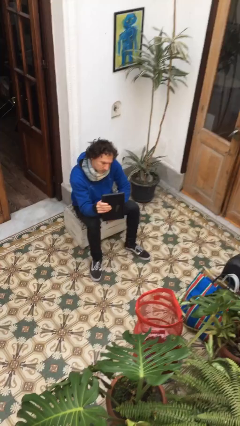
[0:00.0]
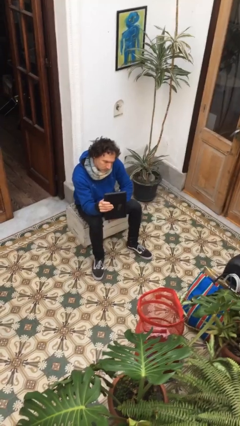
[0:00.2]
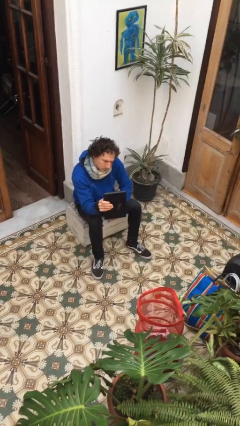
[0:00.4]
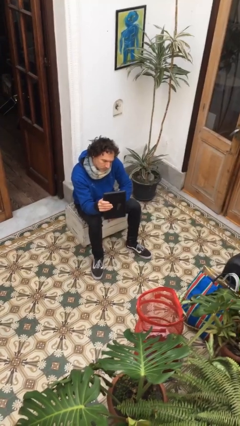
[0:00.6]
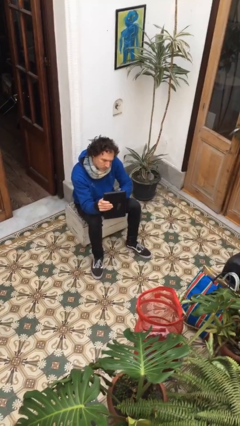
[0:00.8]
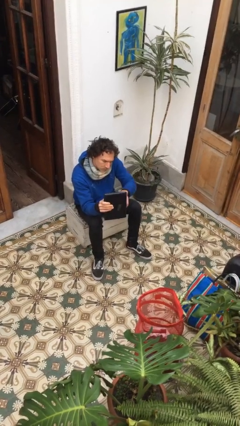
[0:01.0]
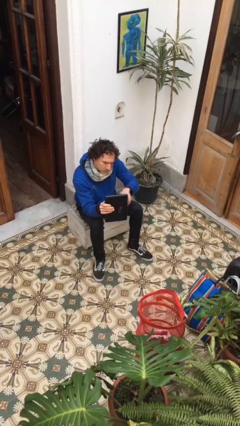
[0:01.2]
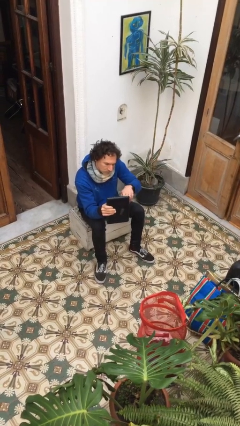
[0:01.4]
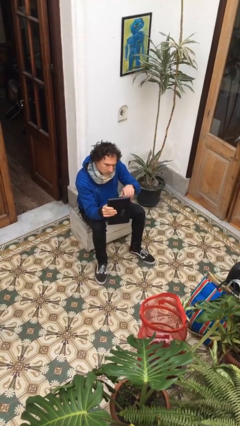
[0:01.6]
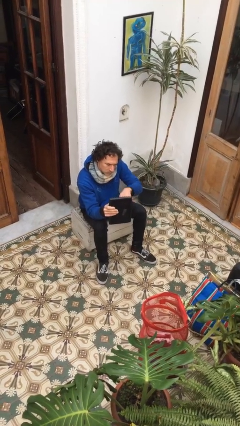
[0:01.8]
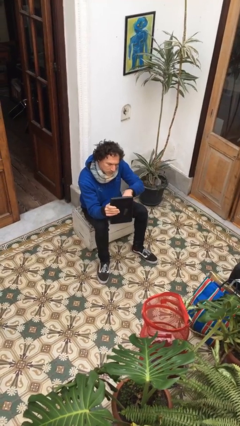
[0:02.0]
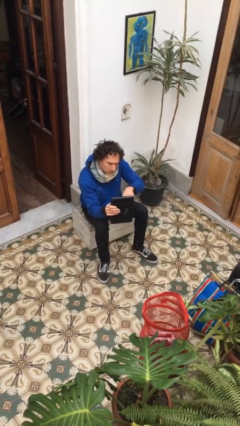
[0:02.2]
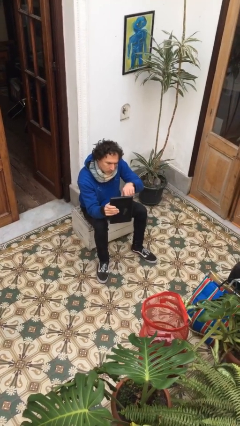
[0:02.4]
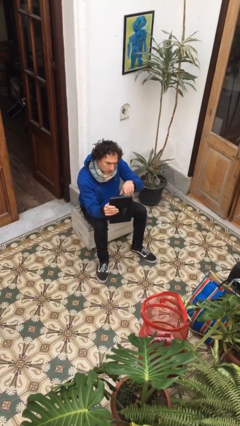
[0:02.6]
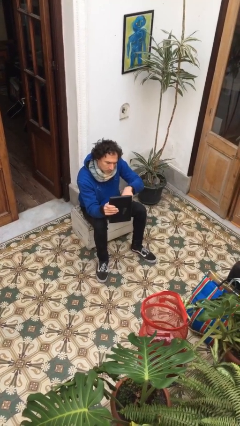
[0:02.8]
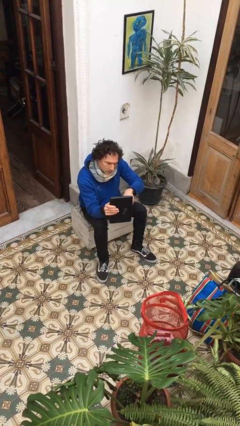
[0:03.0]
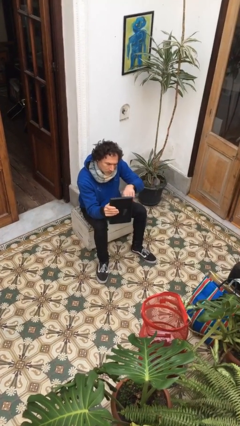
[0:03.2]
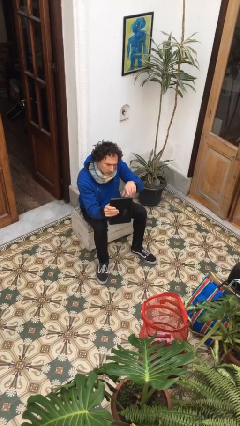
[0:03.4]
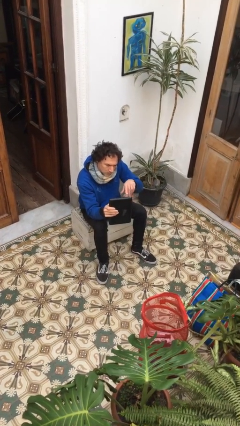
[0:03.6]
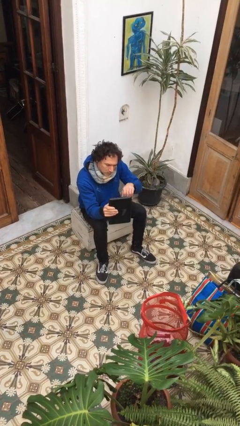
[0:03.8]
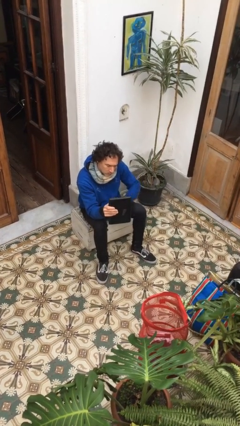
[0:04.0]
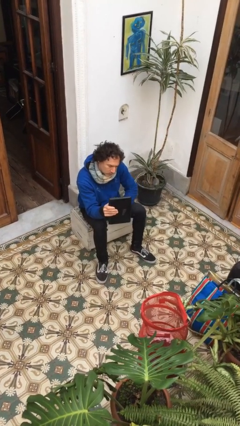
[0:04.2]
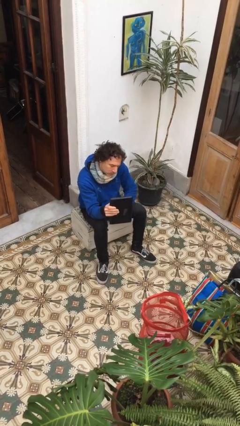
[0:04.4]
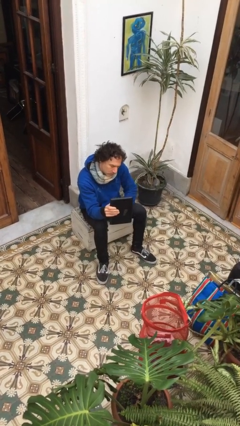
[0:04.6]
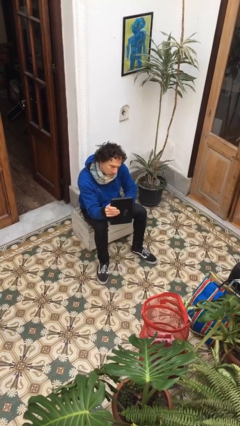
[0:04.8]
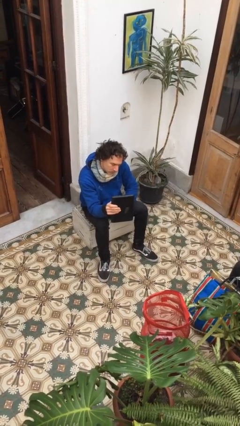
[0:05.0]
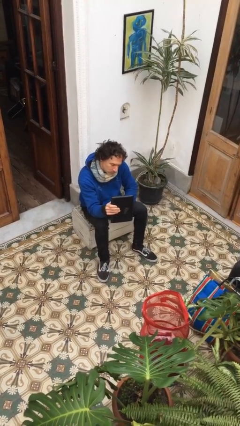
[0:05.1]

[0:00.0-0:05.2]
person interacts with tablet

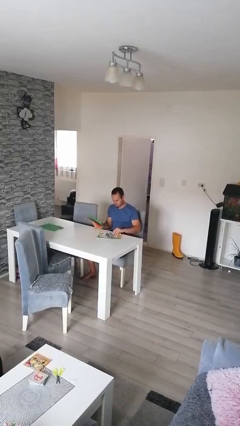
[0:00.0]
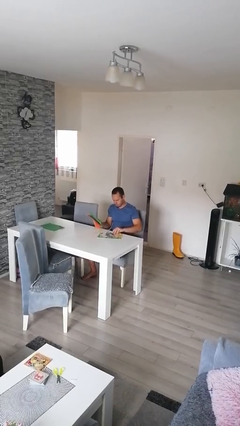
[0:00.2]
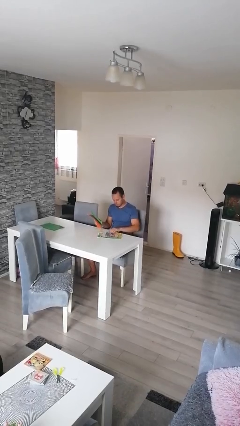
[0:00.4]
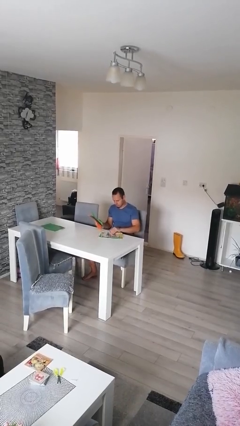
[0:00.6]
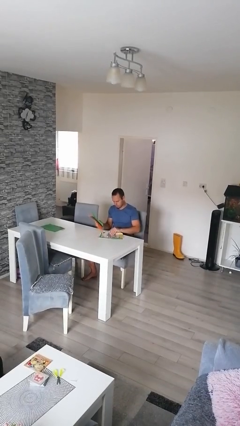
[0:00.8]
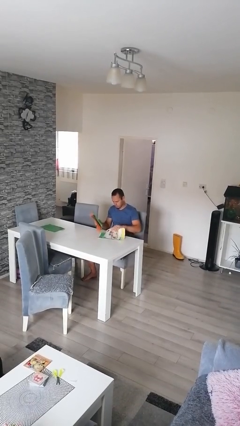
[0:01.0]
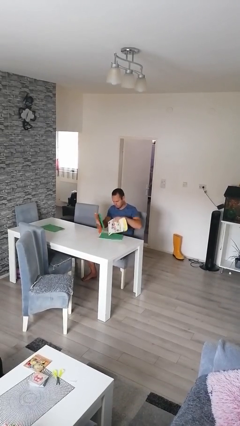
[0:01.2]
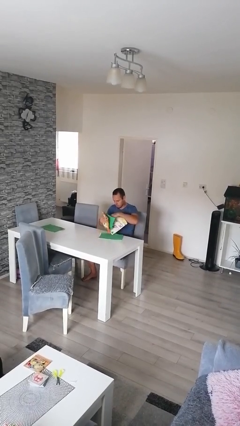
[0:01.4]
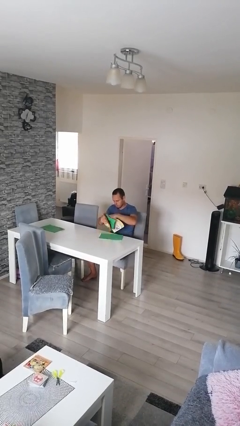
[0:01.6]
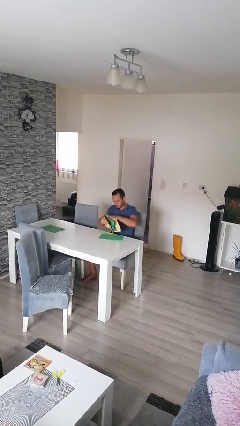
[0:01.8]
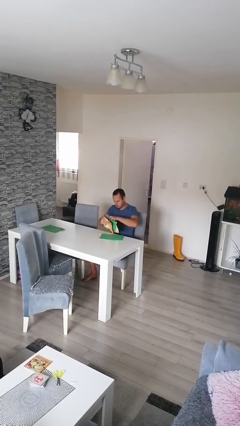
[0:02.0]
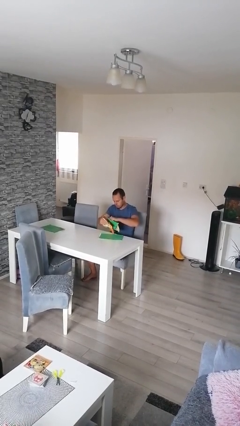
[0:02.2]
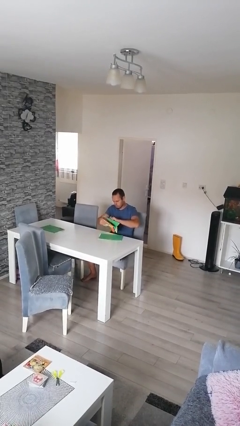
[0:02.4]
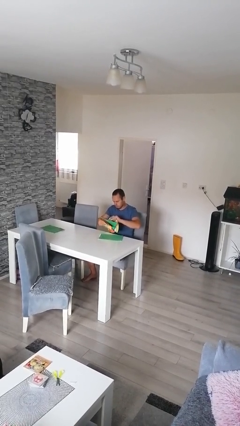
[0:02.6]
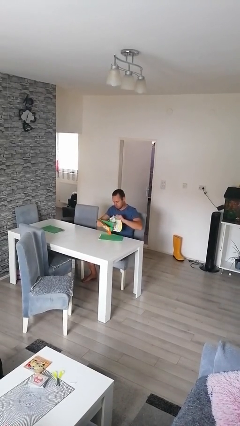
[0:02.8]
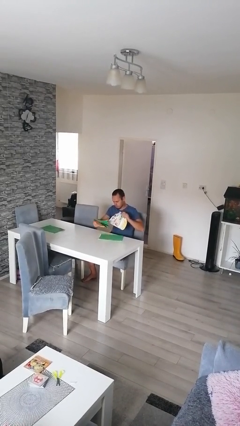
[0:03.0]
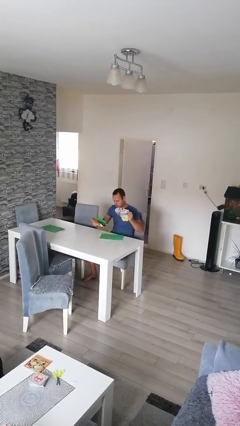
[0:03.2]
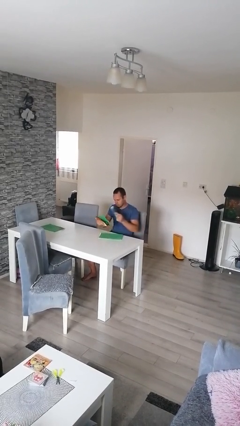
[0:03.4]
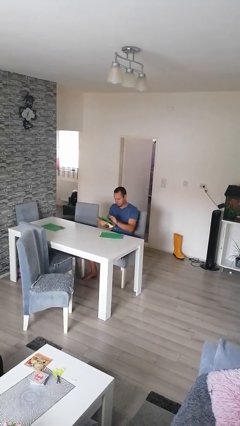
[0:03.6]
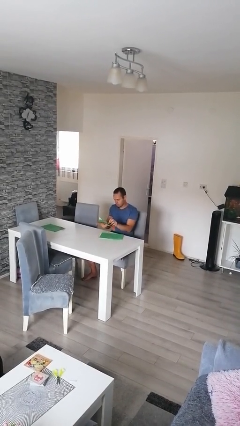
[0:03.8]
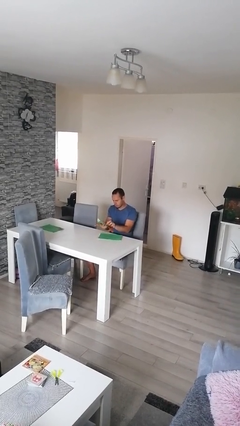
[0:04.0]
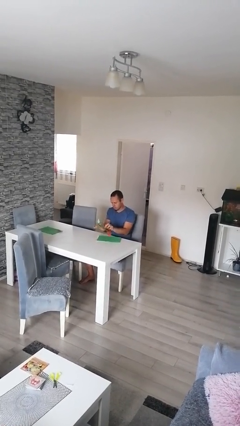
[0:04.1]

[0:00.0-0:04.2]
person tears paper

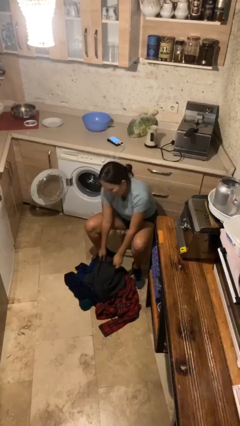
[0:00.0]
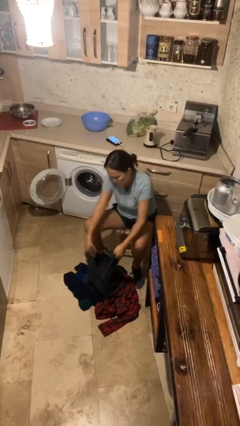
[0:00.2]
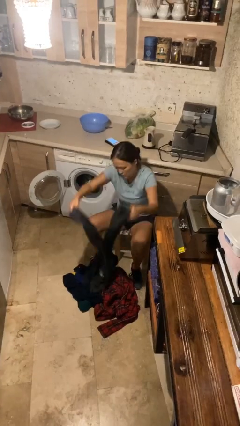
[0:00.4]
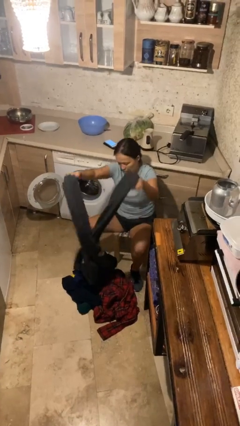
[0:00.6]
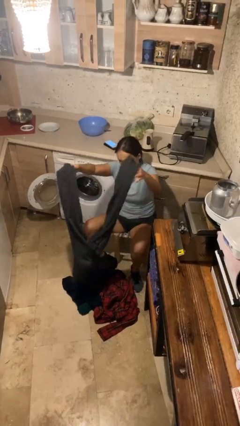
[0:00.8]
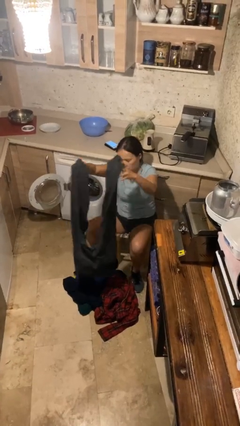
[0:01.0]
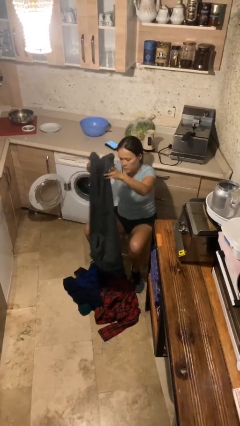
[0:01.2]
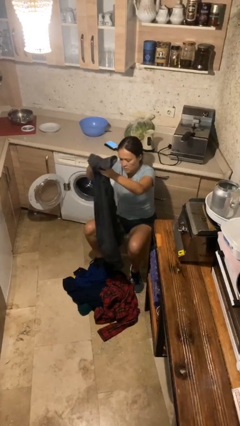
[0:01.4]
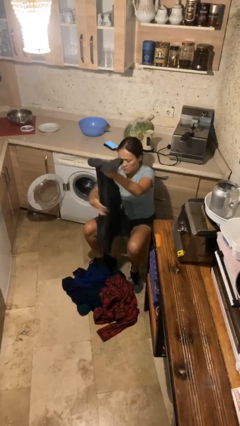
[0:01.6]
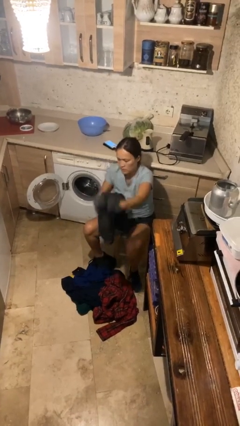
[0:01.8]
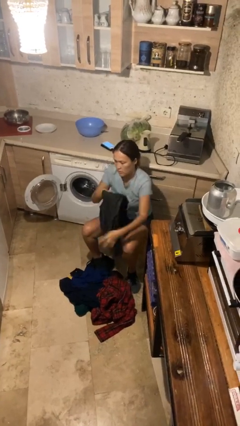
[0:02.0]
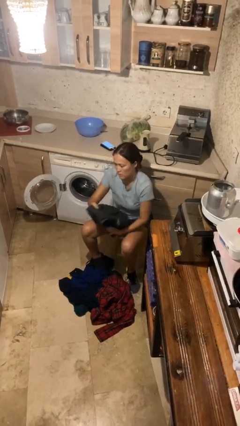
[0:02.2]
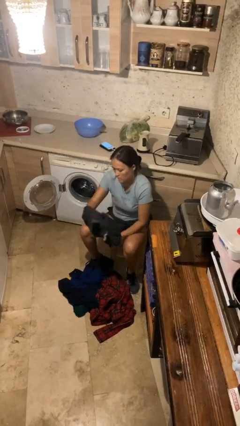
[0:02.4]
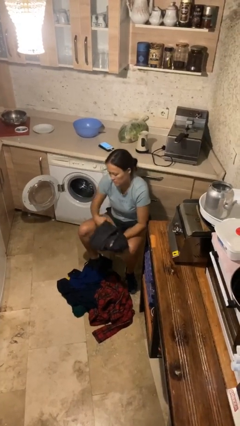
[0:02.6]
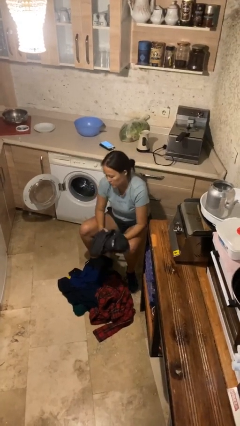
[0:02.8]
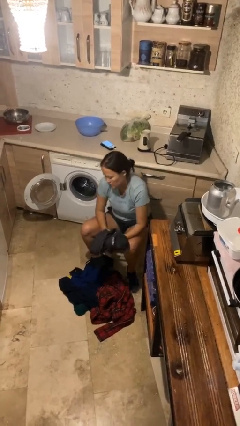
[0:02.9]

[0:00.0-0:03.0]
person folds pants

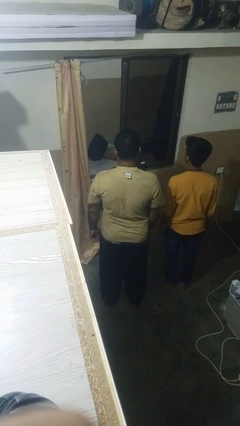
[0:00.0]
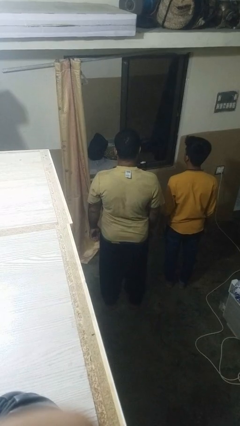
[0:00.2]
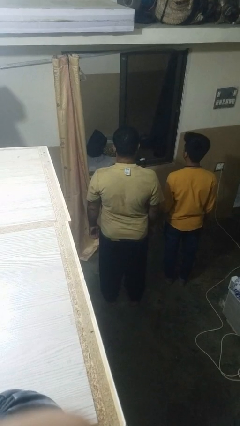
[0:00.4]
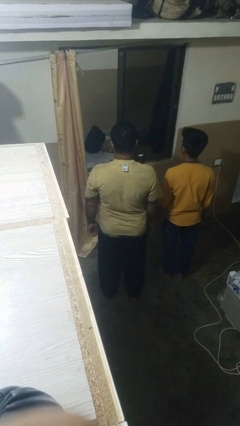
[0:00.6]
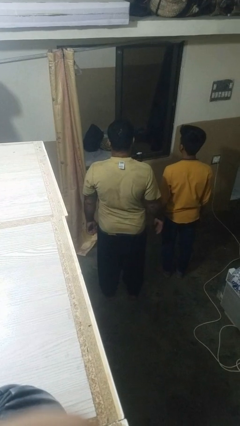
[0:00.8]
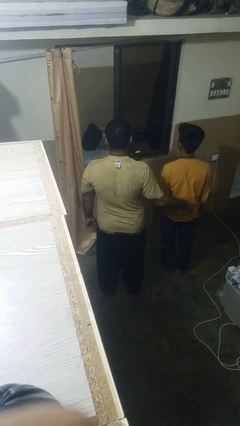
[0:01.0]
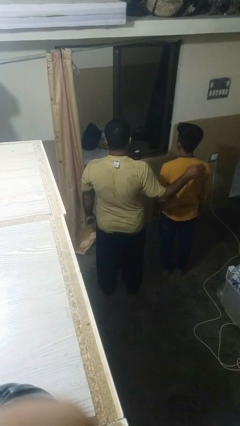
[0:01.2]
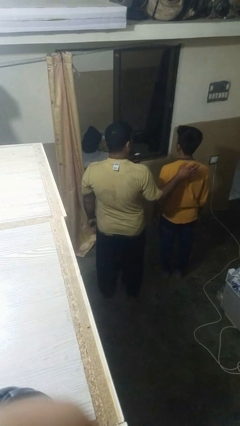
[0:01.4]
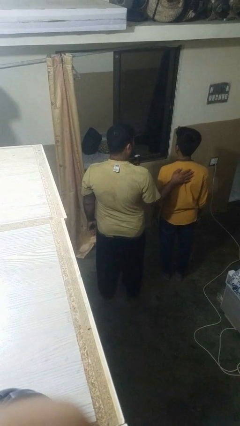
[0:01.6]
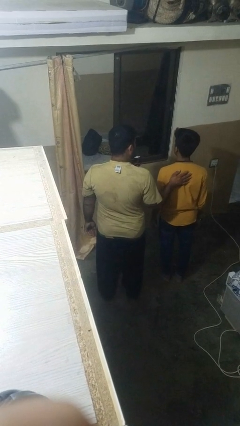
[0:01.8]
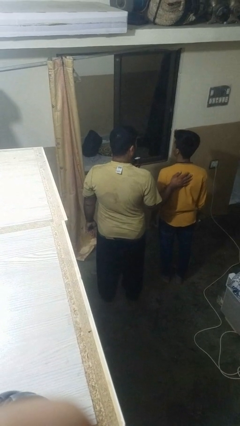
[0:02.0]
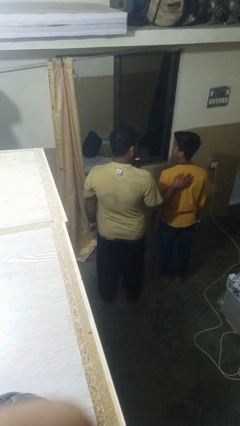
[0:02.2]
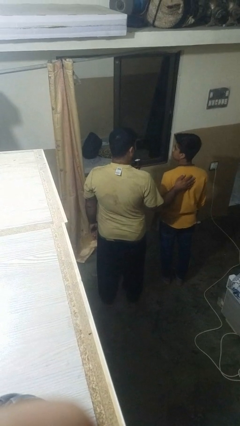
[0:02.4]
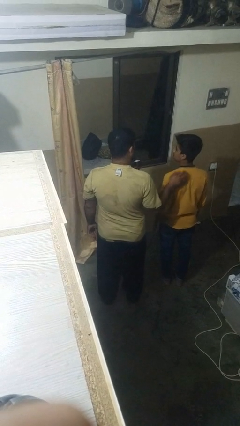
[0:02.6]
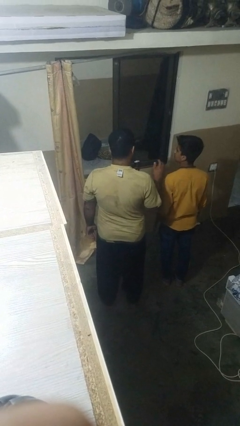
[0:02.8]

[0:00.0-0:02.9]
person touches back of person

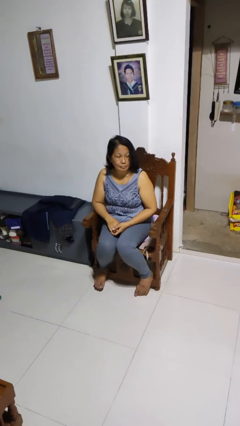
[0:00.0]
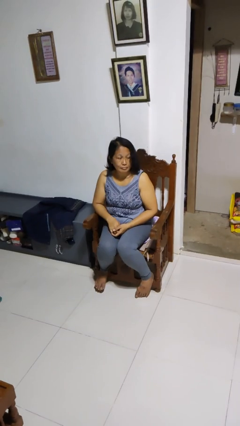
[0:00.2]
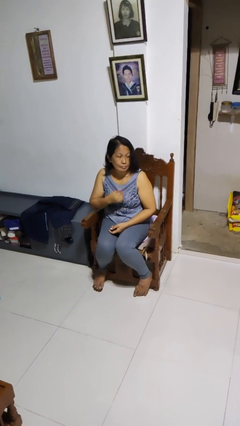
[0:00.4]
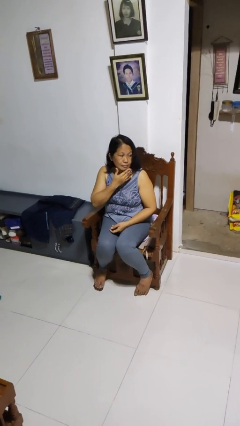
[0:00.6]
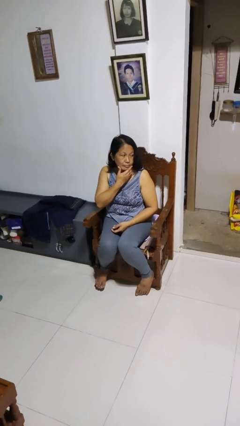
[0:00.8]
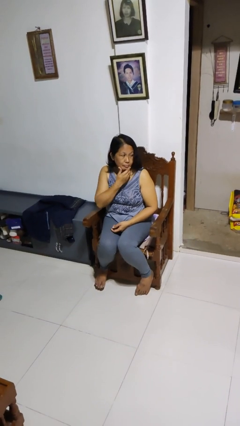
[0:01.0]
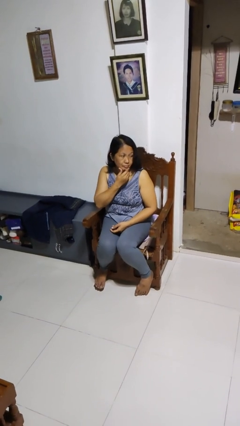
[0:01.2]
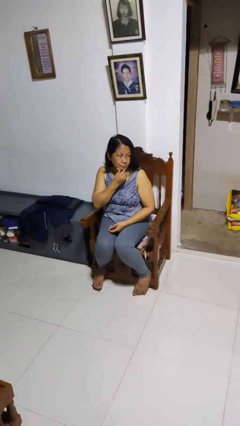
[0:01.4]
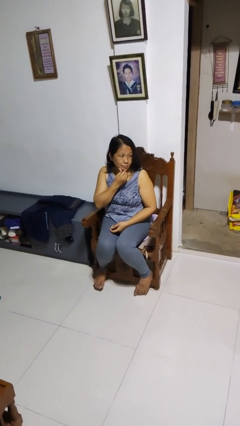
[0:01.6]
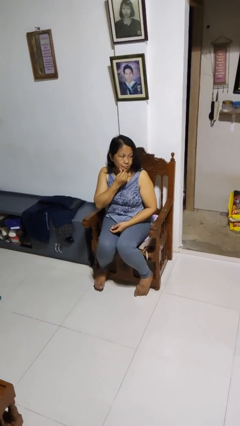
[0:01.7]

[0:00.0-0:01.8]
person strokes chin

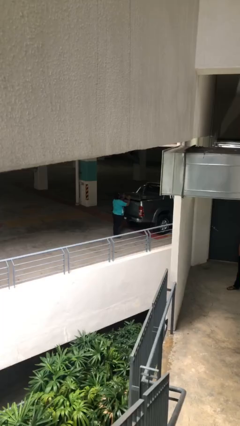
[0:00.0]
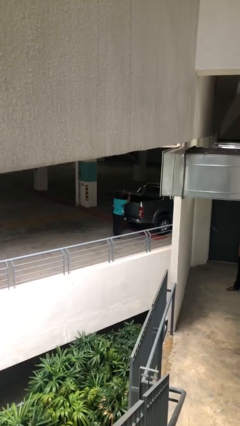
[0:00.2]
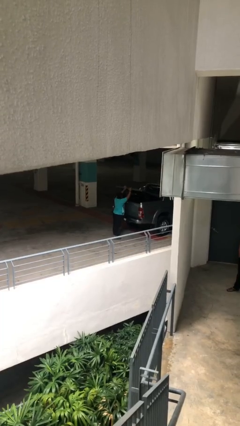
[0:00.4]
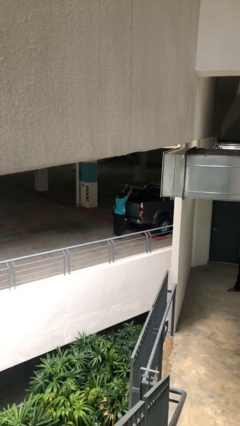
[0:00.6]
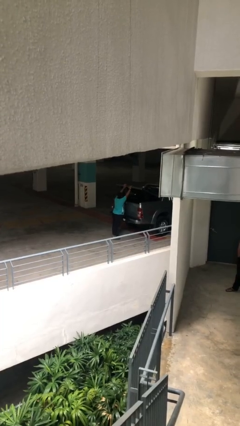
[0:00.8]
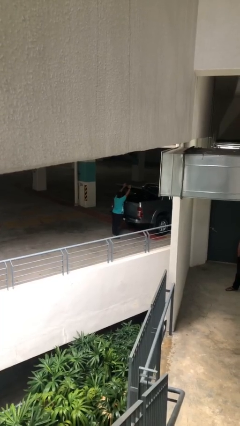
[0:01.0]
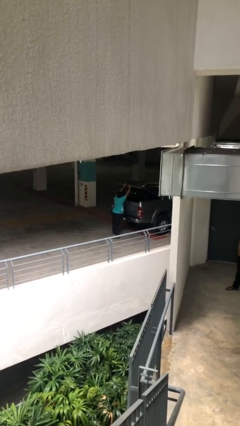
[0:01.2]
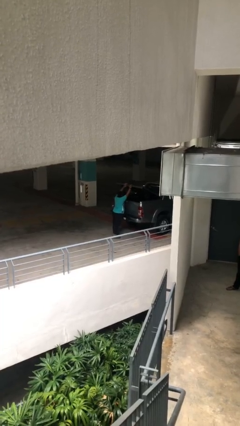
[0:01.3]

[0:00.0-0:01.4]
person opens car trunk
